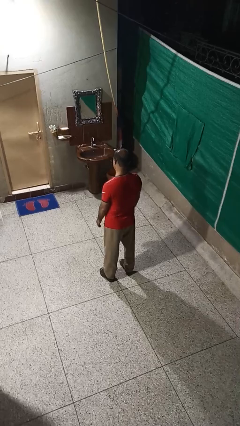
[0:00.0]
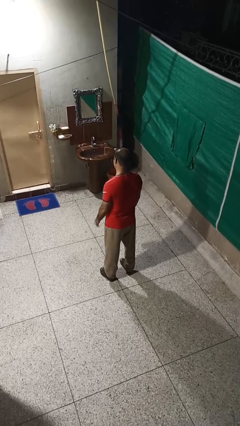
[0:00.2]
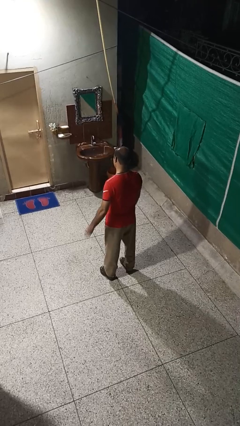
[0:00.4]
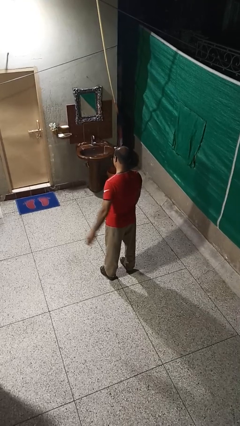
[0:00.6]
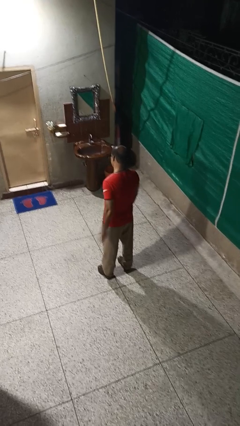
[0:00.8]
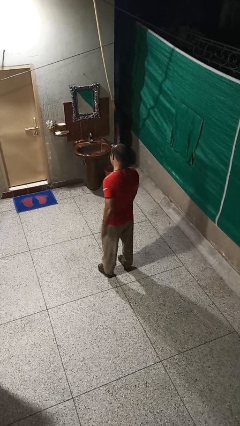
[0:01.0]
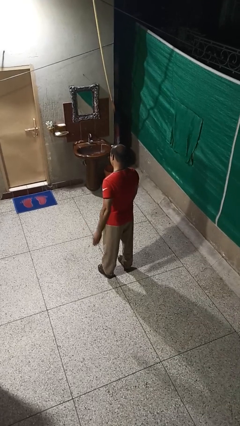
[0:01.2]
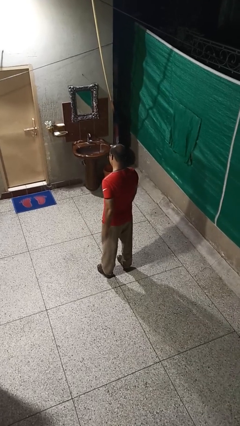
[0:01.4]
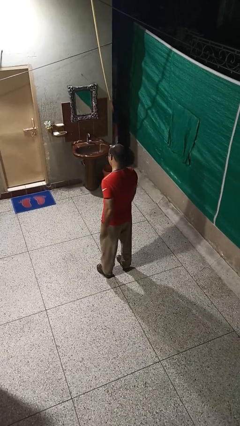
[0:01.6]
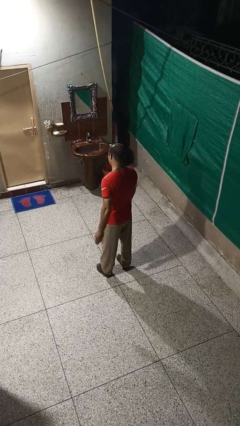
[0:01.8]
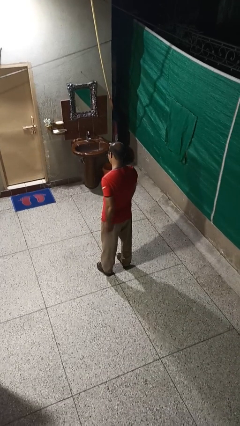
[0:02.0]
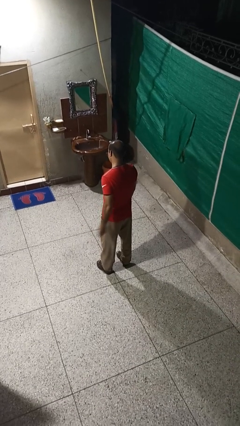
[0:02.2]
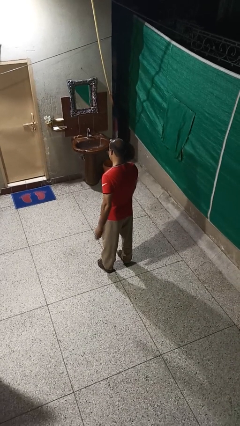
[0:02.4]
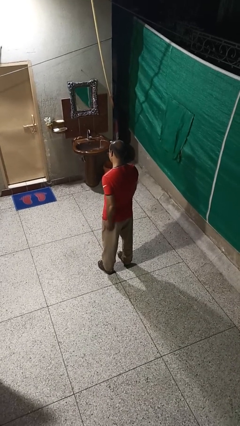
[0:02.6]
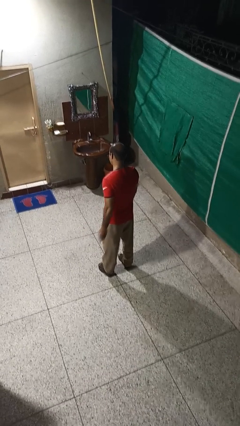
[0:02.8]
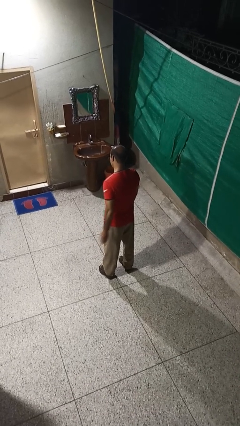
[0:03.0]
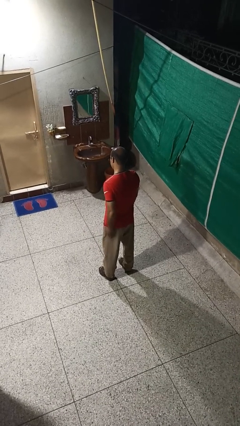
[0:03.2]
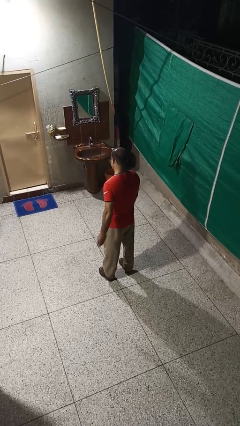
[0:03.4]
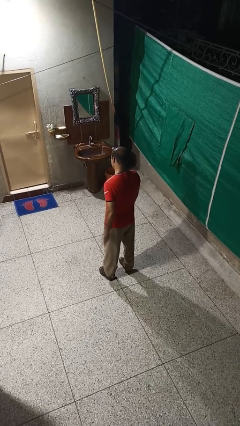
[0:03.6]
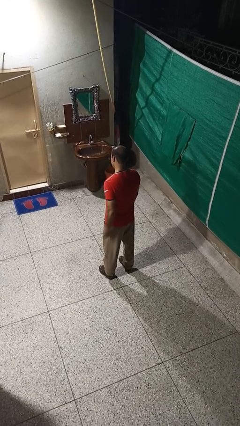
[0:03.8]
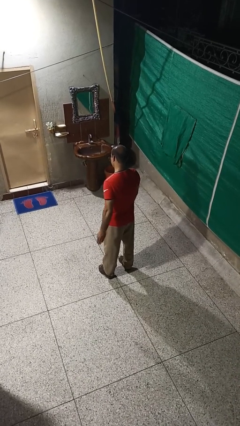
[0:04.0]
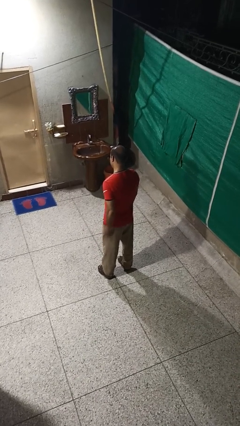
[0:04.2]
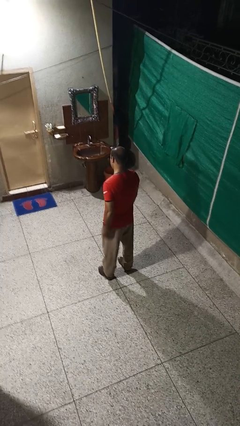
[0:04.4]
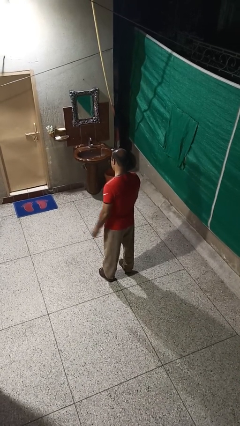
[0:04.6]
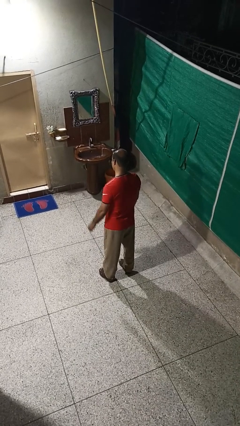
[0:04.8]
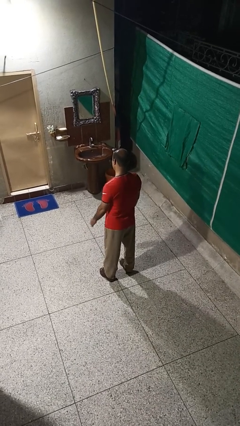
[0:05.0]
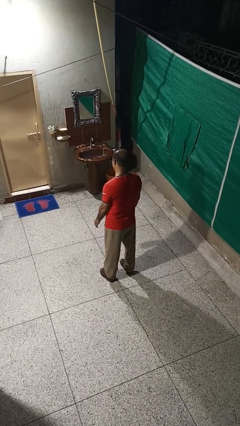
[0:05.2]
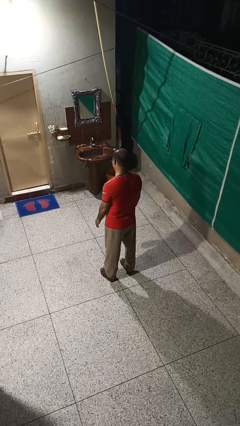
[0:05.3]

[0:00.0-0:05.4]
person slaps hands on thighs

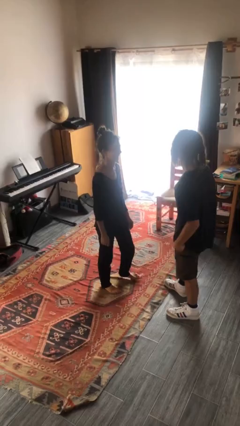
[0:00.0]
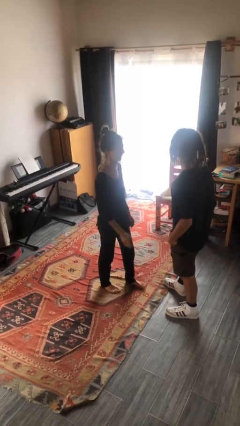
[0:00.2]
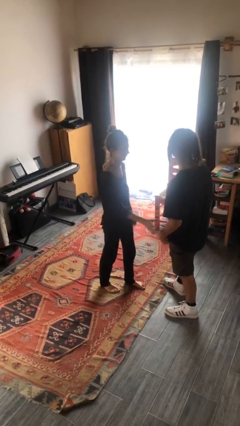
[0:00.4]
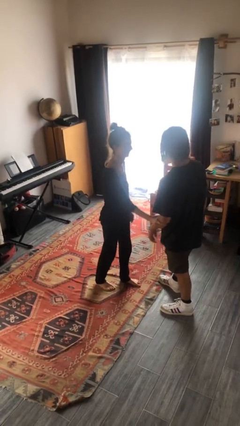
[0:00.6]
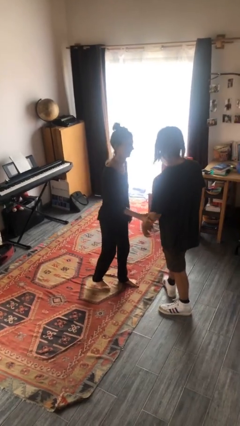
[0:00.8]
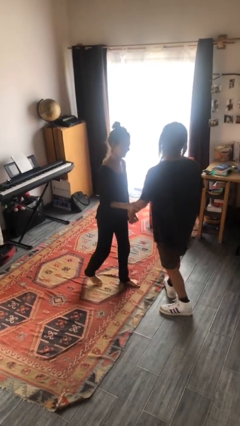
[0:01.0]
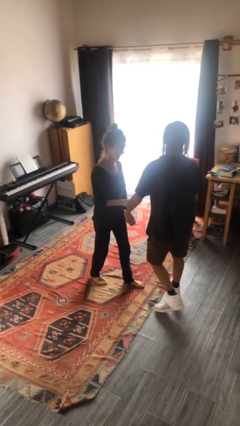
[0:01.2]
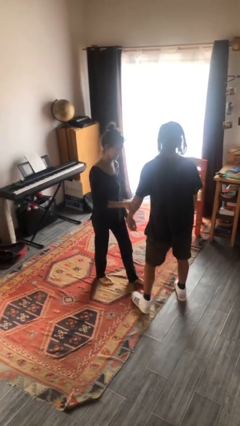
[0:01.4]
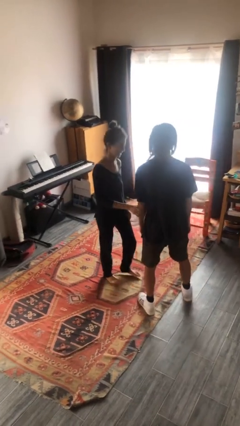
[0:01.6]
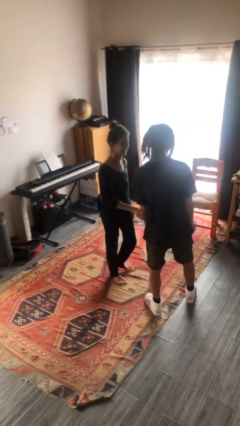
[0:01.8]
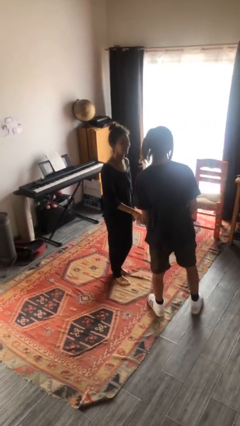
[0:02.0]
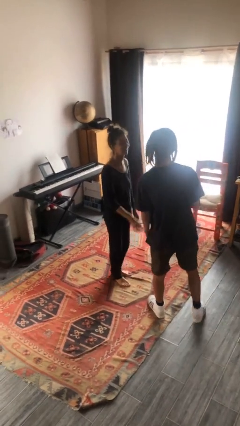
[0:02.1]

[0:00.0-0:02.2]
person grabs person by forearm

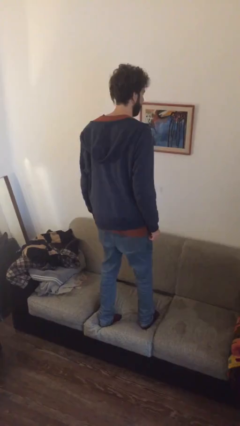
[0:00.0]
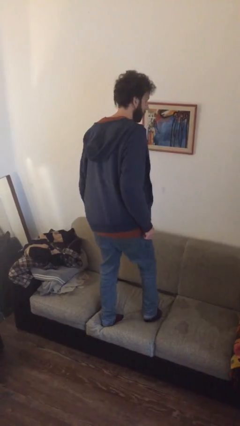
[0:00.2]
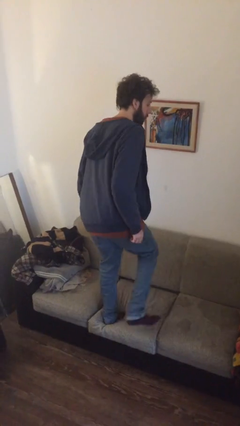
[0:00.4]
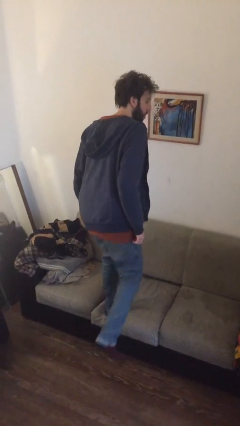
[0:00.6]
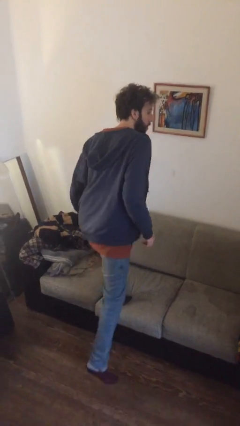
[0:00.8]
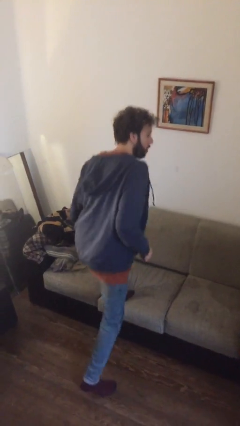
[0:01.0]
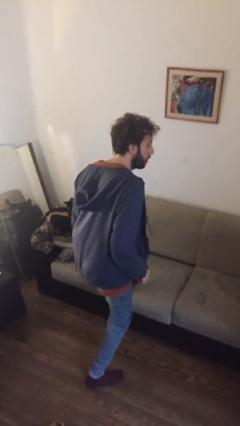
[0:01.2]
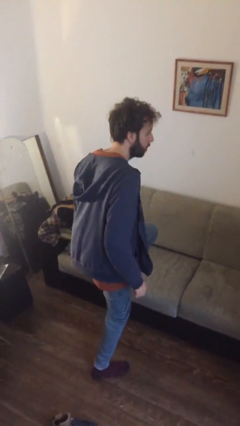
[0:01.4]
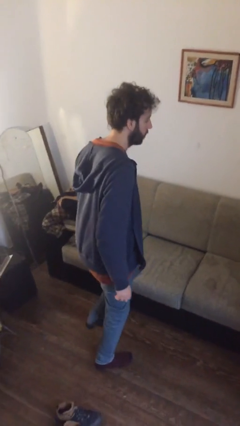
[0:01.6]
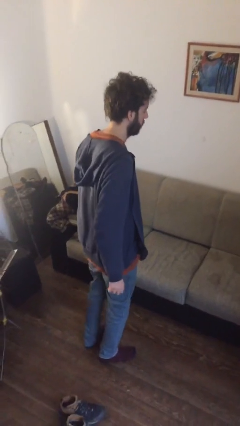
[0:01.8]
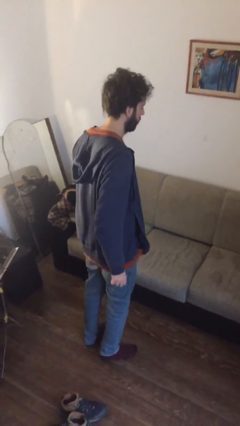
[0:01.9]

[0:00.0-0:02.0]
person climbs off couch

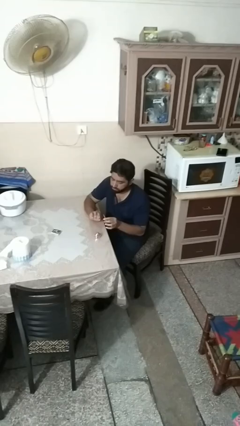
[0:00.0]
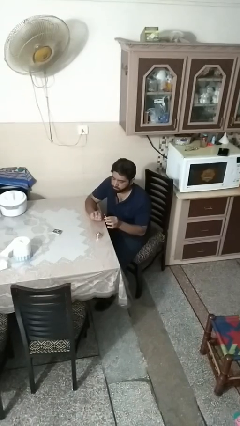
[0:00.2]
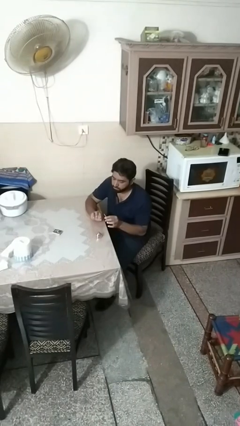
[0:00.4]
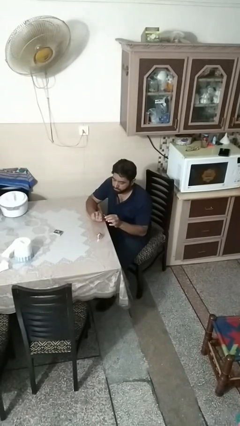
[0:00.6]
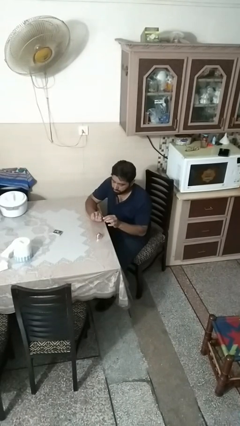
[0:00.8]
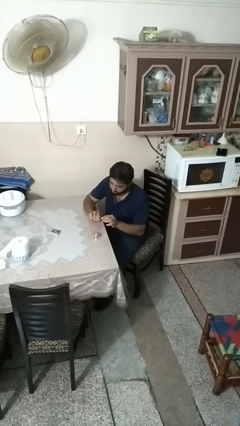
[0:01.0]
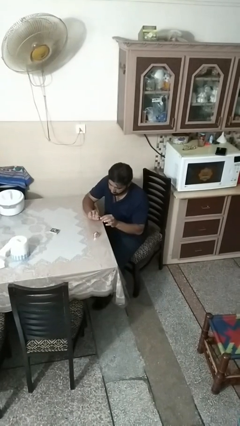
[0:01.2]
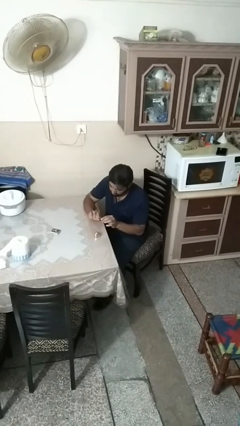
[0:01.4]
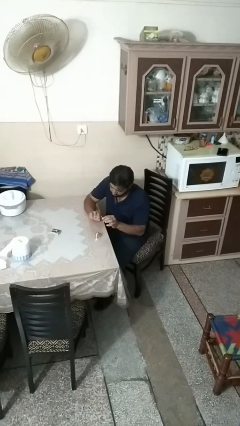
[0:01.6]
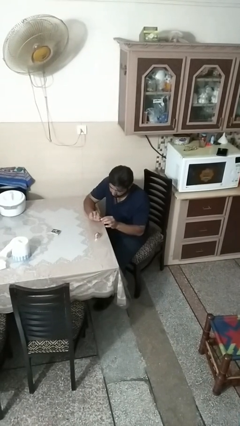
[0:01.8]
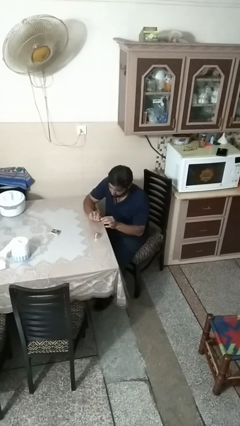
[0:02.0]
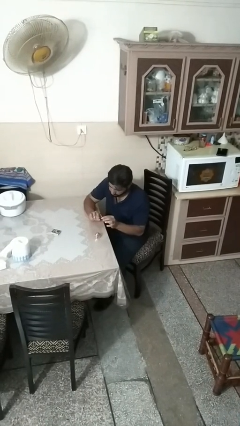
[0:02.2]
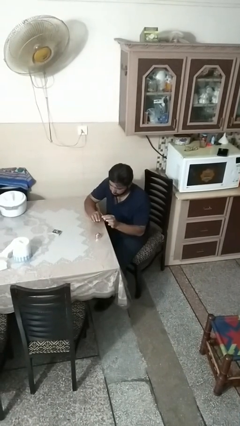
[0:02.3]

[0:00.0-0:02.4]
person paints fingernails

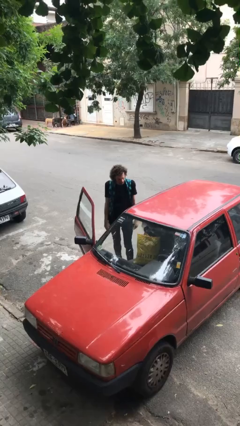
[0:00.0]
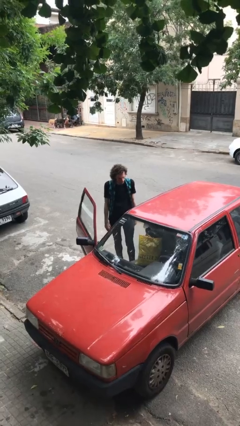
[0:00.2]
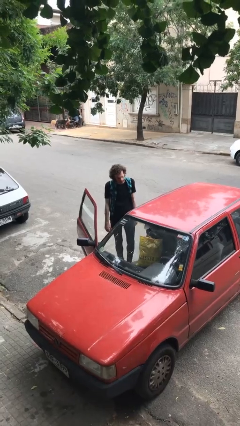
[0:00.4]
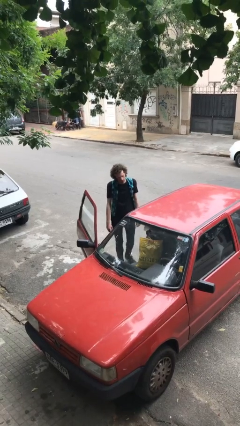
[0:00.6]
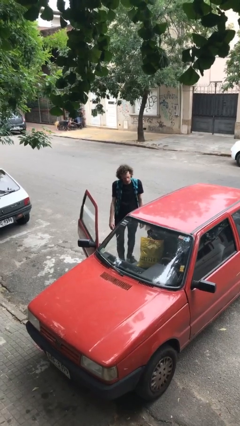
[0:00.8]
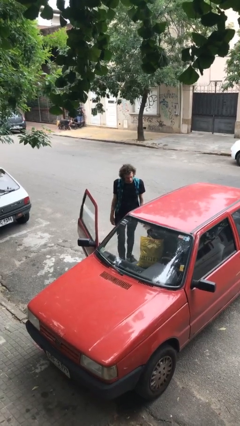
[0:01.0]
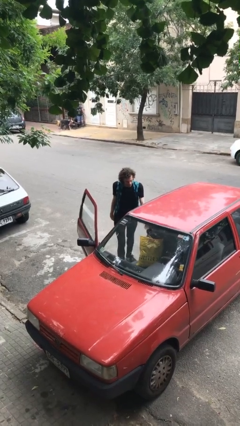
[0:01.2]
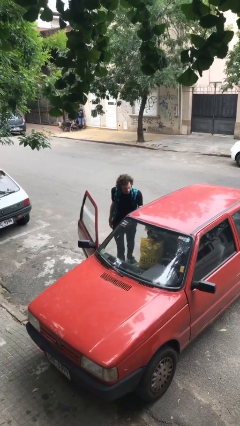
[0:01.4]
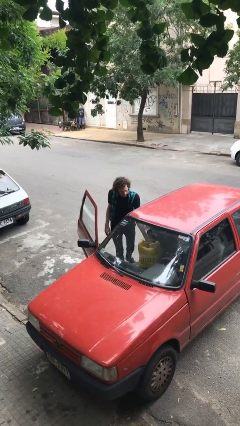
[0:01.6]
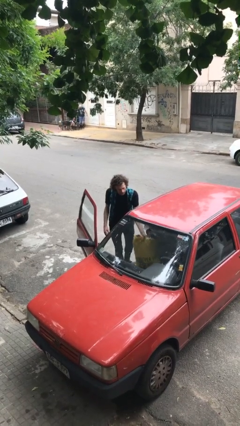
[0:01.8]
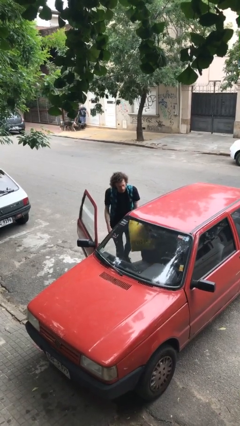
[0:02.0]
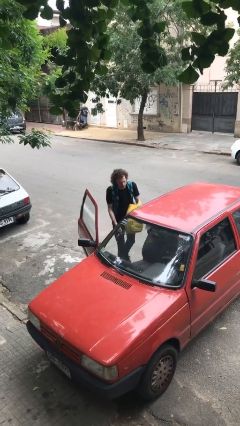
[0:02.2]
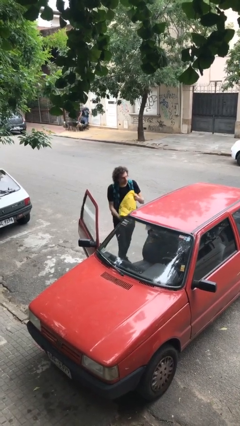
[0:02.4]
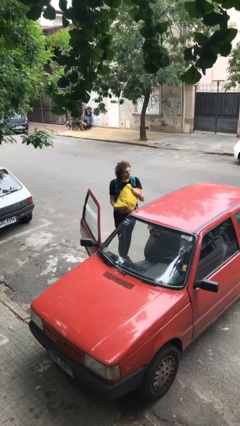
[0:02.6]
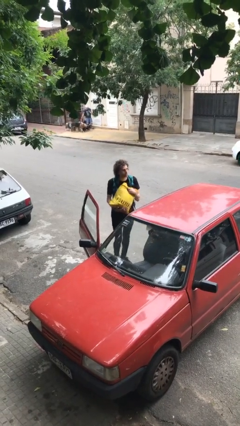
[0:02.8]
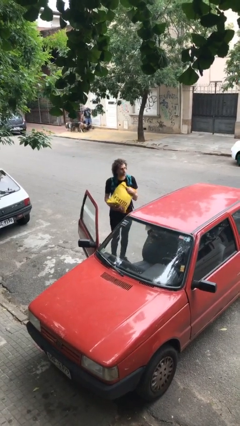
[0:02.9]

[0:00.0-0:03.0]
person unloads car

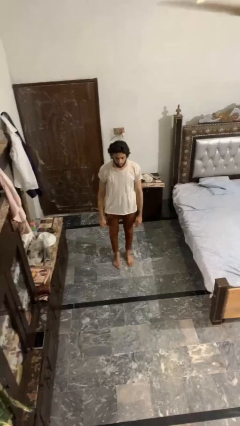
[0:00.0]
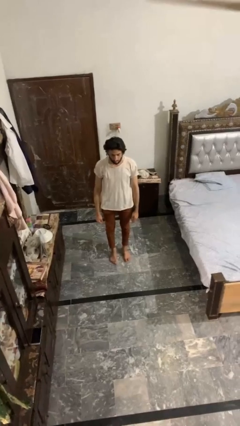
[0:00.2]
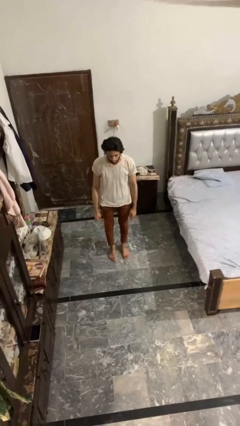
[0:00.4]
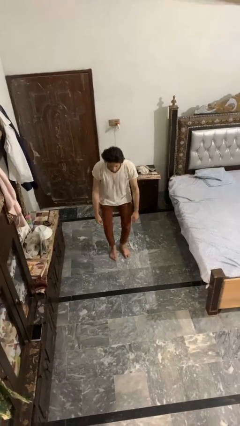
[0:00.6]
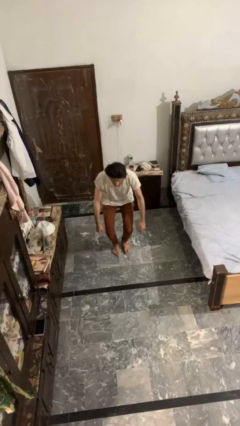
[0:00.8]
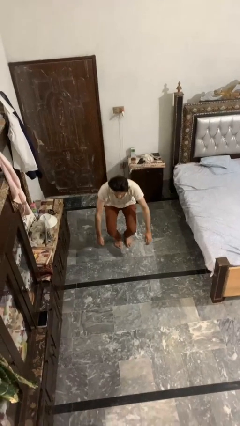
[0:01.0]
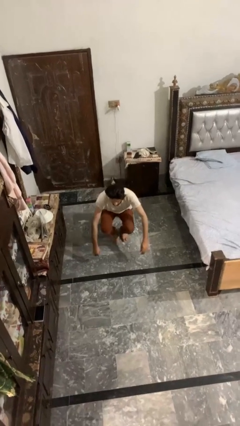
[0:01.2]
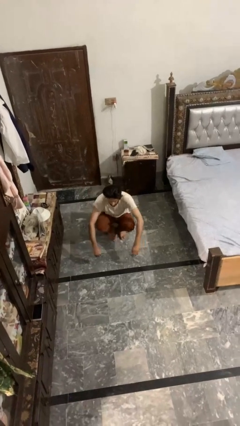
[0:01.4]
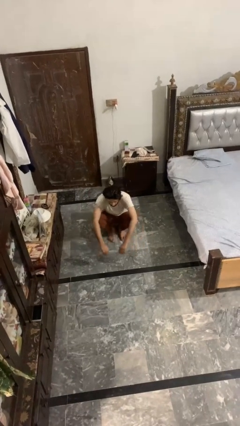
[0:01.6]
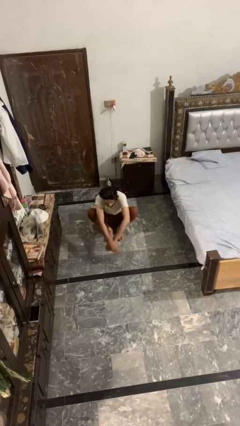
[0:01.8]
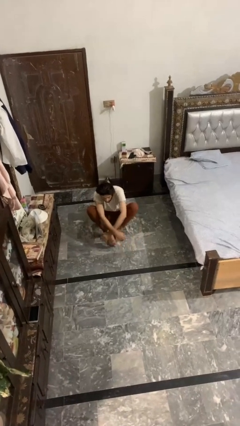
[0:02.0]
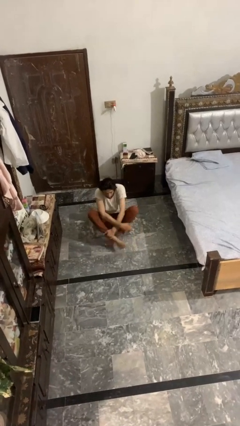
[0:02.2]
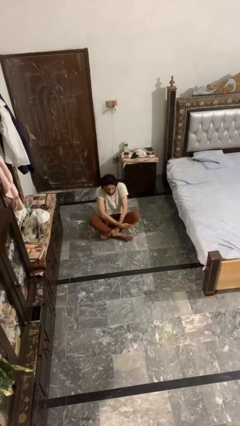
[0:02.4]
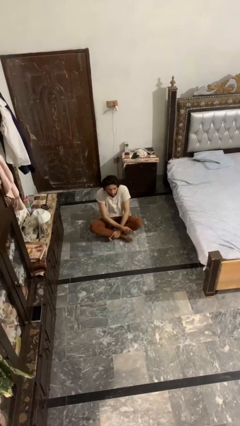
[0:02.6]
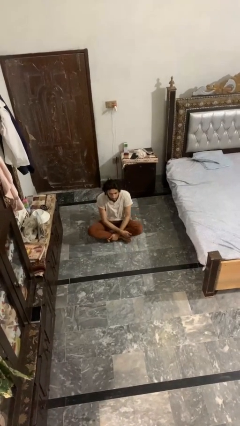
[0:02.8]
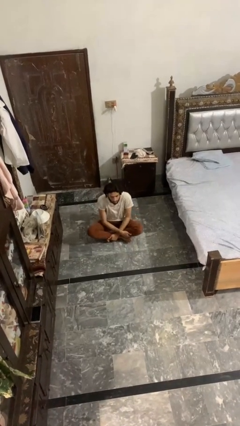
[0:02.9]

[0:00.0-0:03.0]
person sits crisscross
